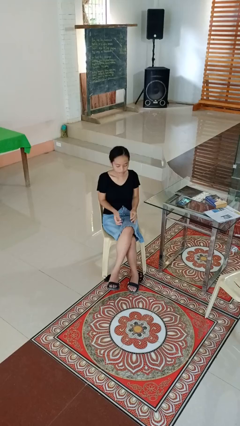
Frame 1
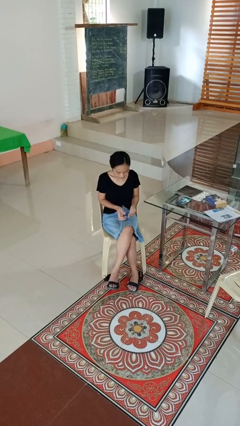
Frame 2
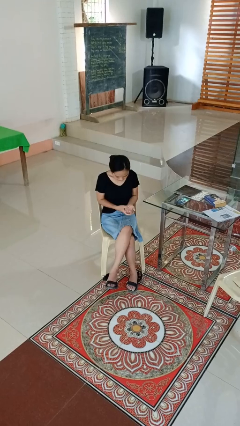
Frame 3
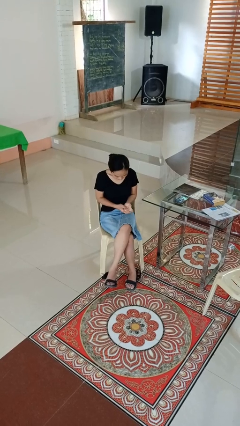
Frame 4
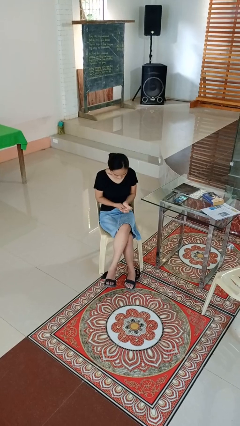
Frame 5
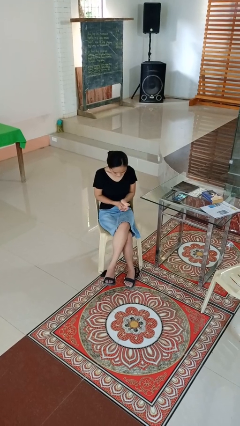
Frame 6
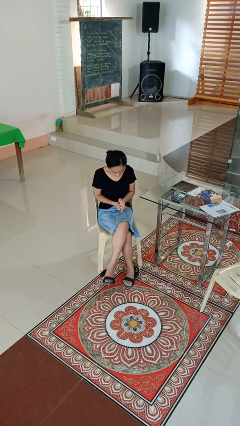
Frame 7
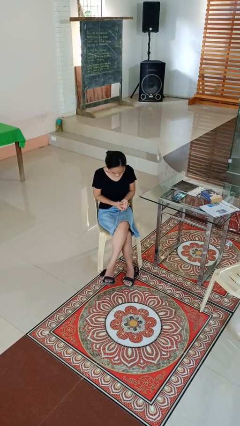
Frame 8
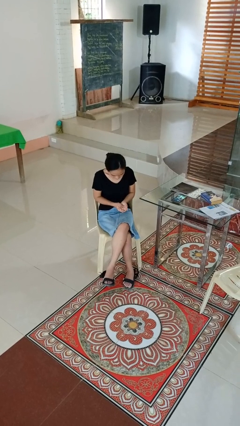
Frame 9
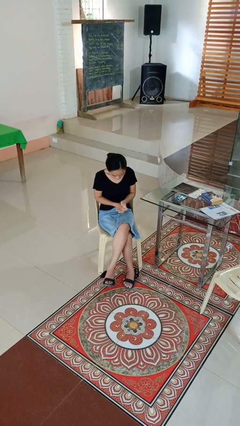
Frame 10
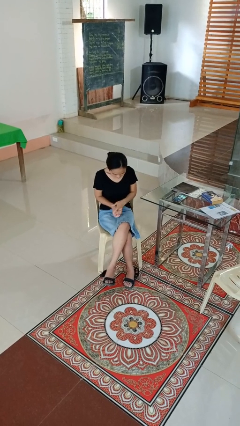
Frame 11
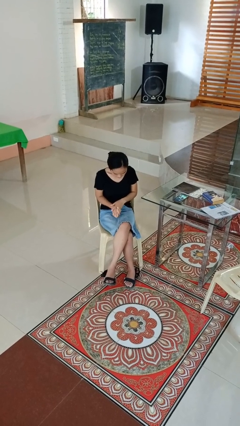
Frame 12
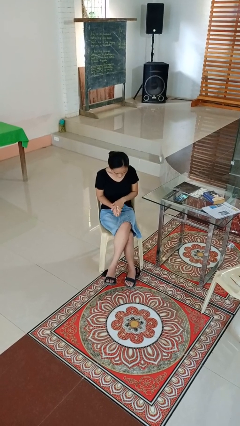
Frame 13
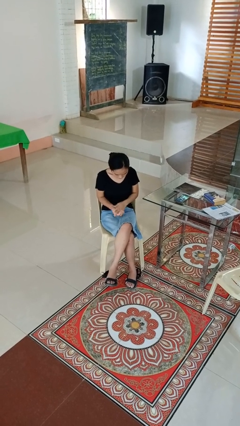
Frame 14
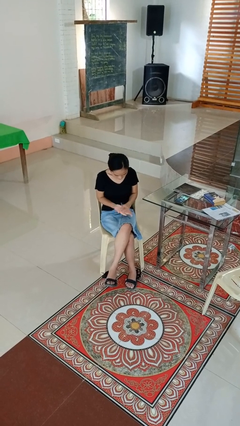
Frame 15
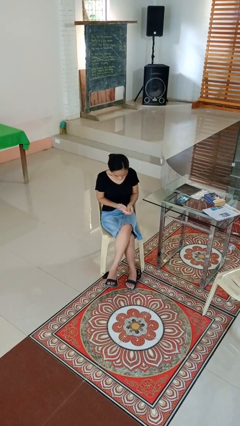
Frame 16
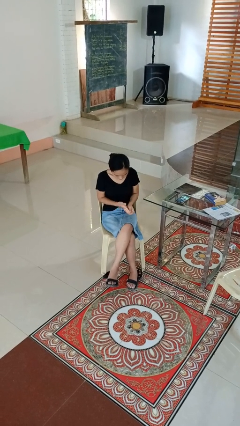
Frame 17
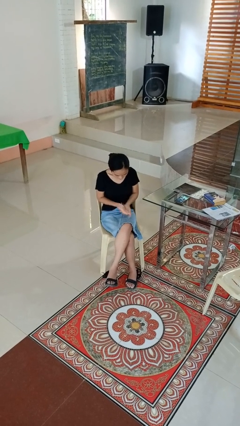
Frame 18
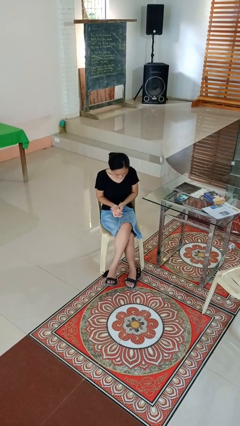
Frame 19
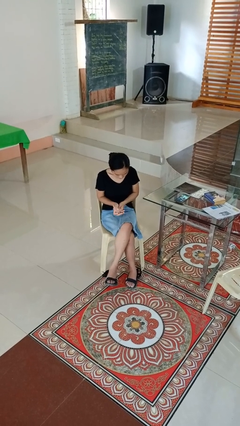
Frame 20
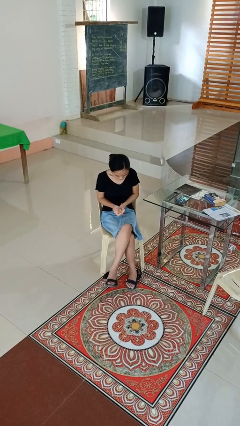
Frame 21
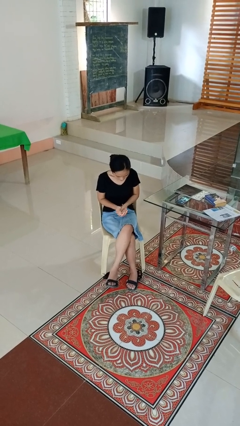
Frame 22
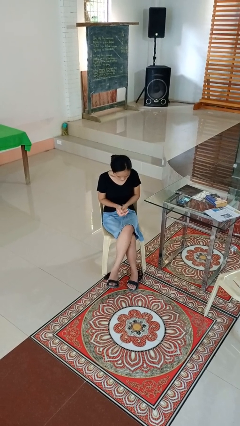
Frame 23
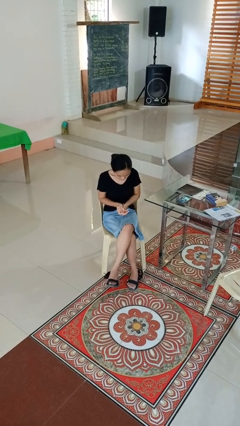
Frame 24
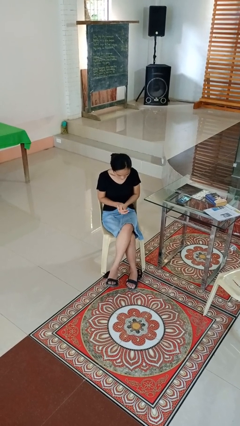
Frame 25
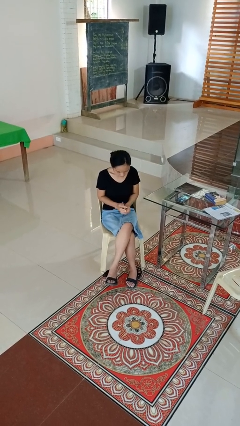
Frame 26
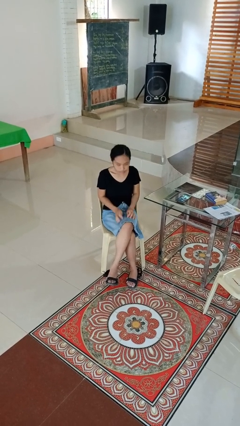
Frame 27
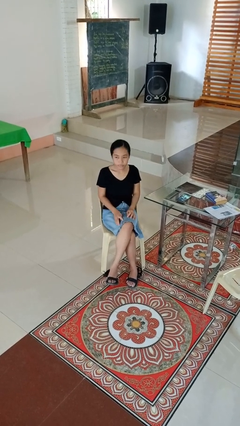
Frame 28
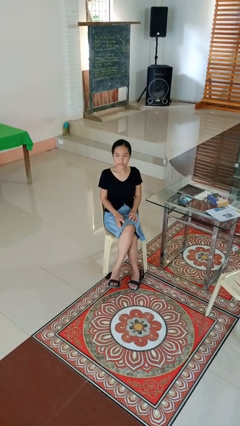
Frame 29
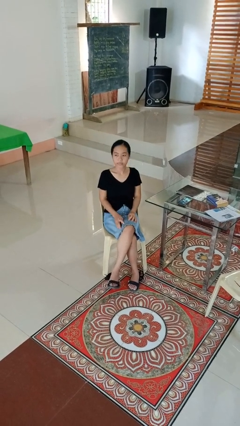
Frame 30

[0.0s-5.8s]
person looks at hands in lap

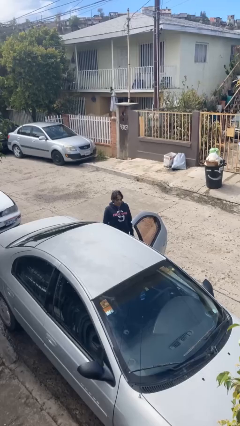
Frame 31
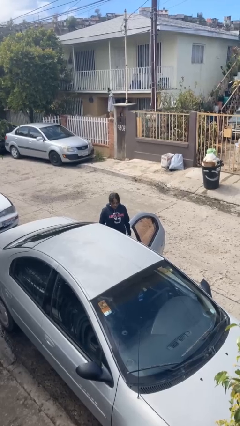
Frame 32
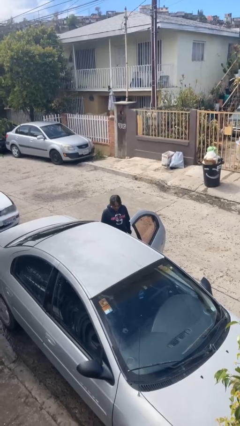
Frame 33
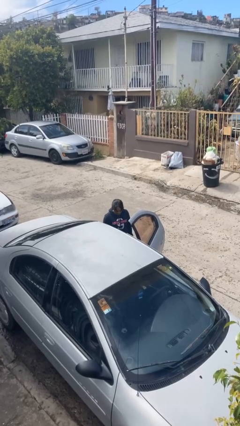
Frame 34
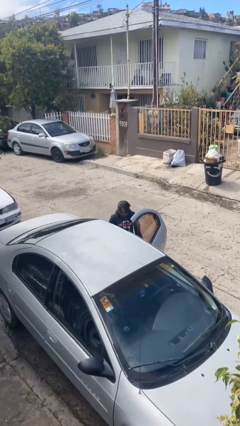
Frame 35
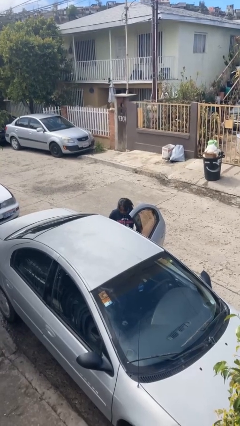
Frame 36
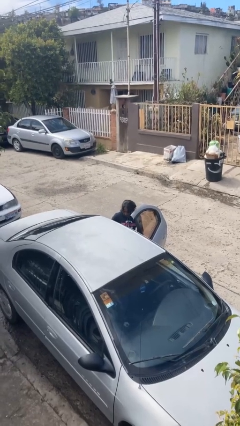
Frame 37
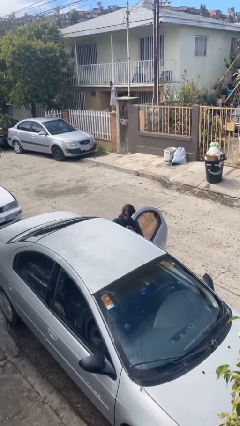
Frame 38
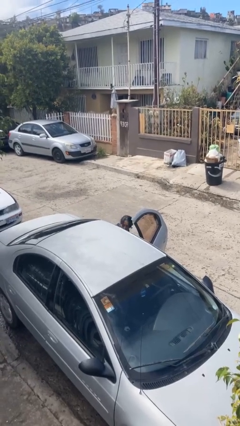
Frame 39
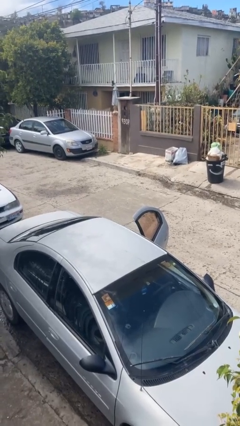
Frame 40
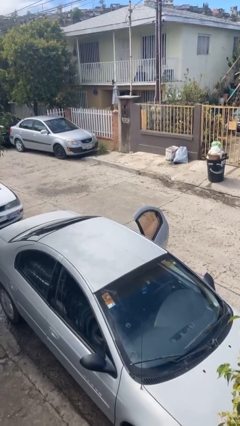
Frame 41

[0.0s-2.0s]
person enters car

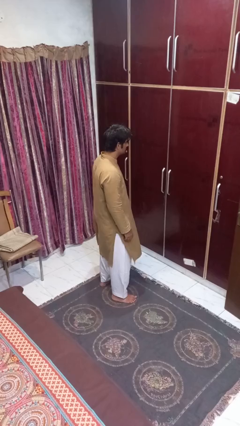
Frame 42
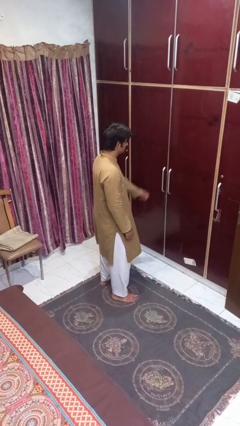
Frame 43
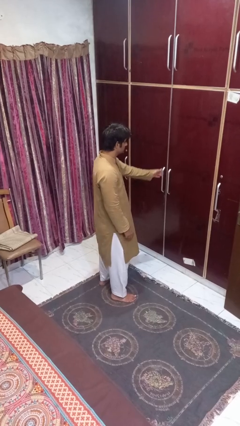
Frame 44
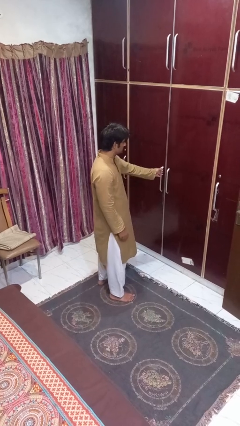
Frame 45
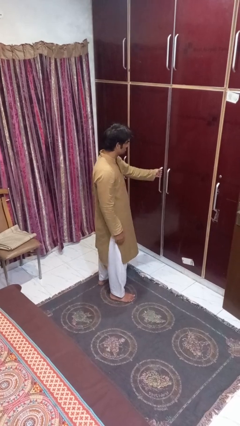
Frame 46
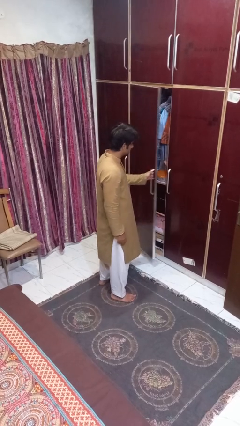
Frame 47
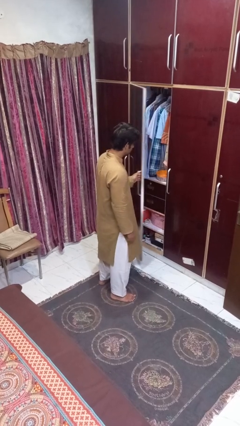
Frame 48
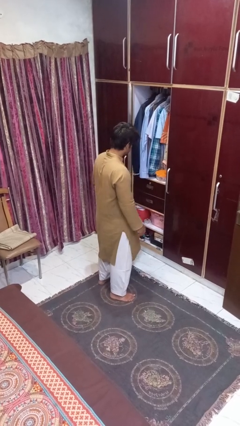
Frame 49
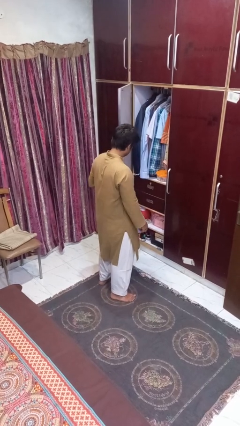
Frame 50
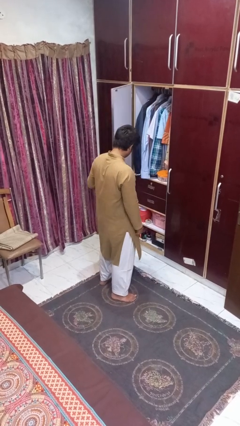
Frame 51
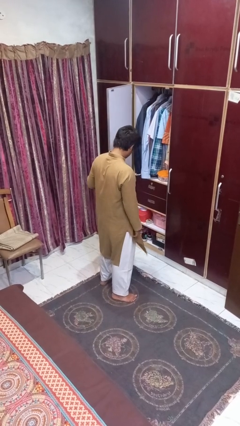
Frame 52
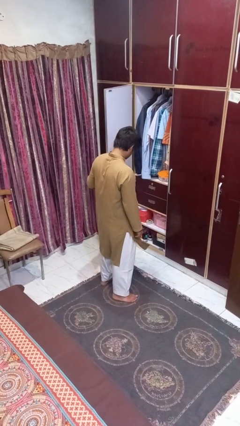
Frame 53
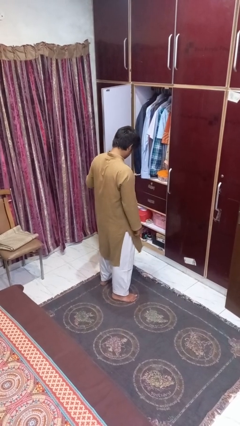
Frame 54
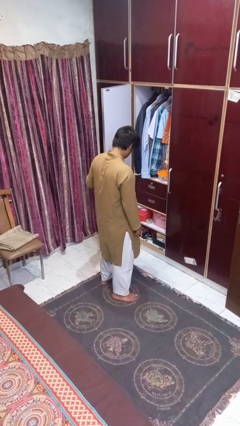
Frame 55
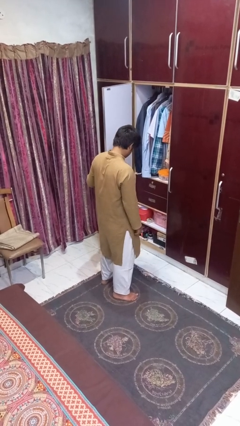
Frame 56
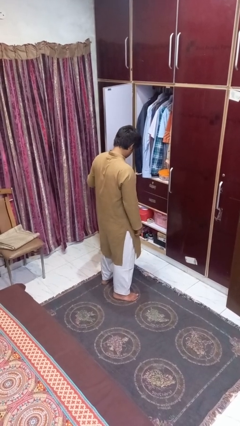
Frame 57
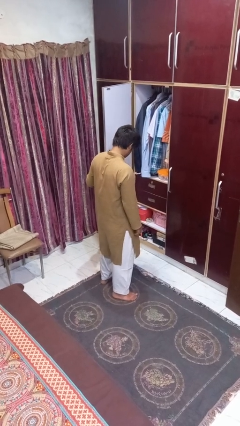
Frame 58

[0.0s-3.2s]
person opens closet door

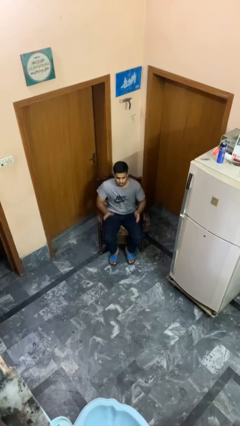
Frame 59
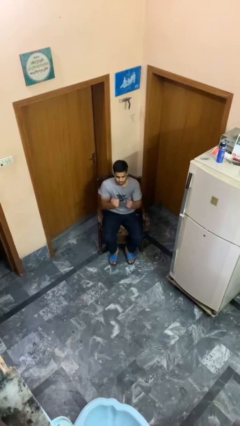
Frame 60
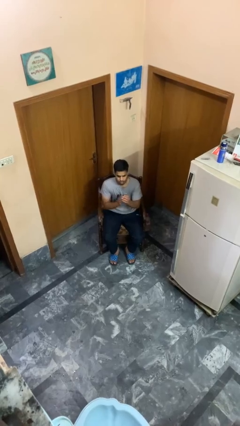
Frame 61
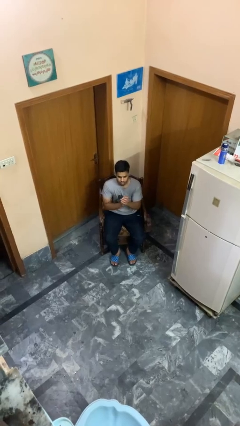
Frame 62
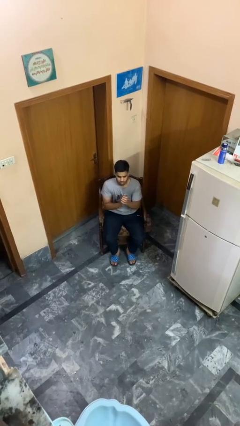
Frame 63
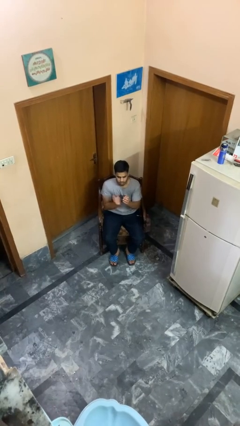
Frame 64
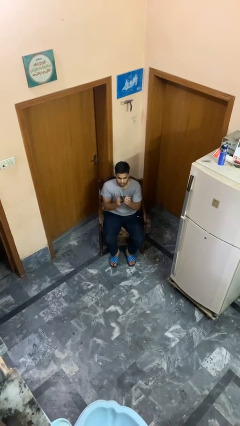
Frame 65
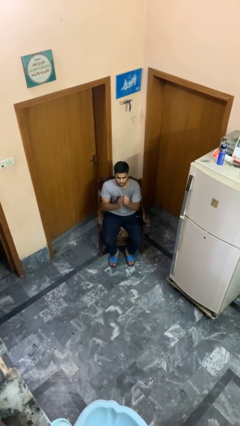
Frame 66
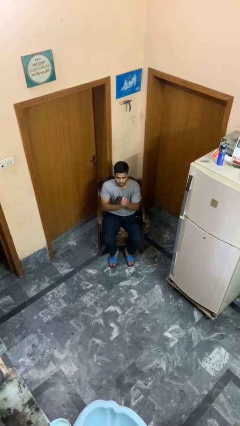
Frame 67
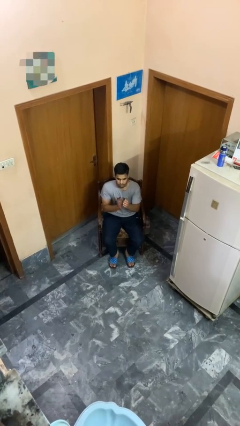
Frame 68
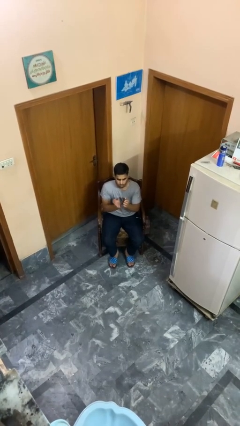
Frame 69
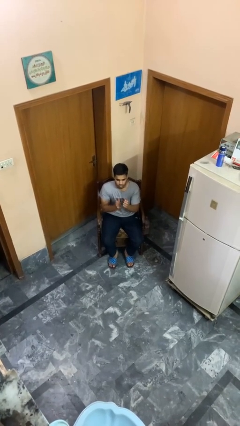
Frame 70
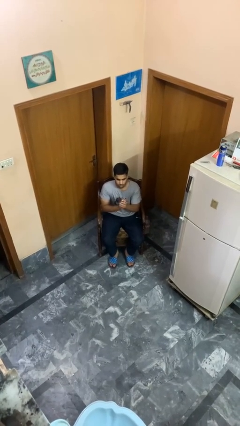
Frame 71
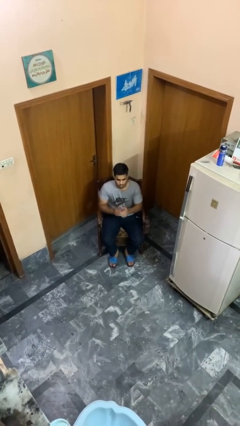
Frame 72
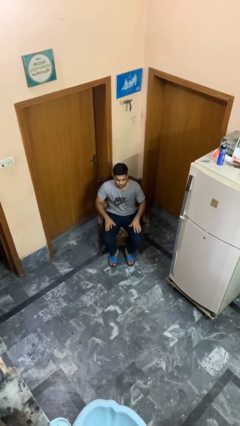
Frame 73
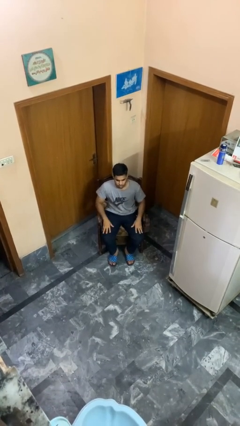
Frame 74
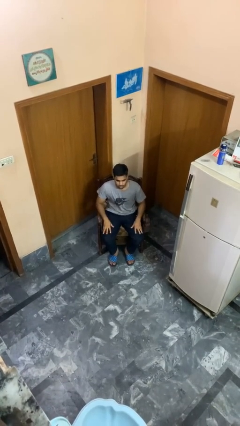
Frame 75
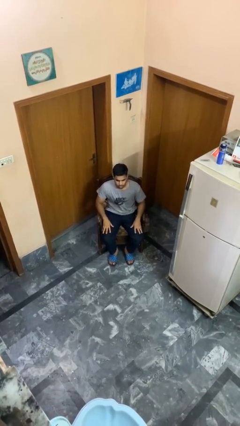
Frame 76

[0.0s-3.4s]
person claps hands

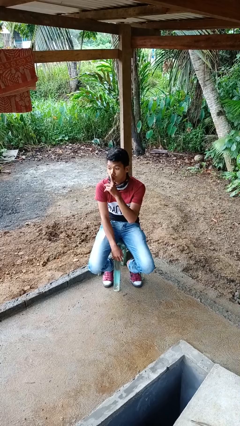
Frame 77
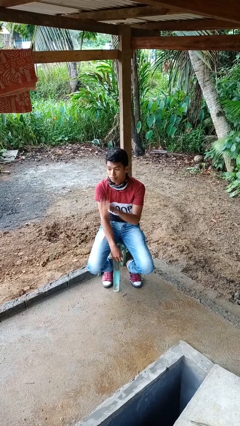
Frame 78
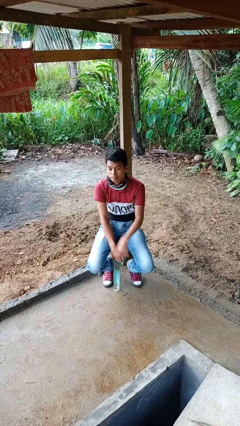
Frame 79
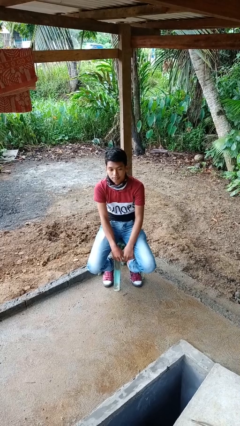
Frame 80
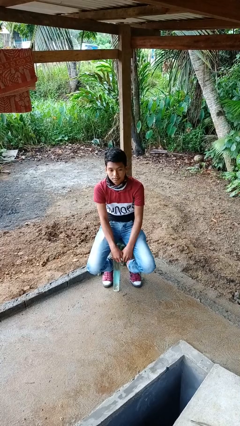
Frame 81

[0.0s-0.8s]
person gestures be quiet

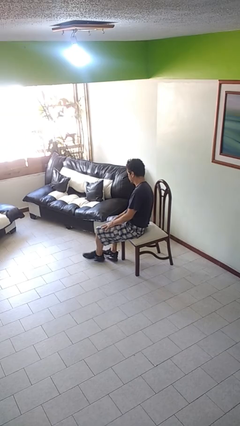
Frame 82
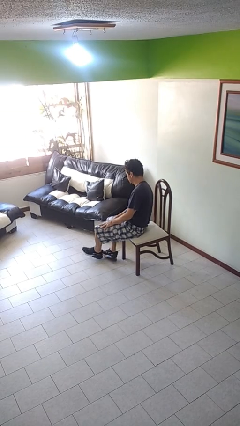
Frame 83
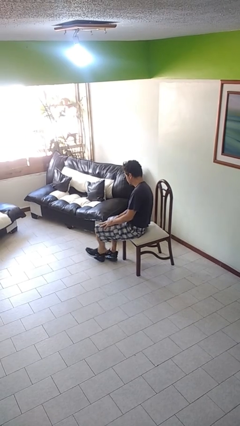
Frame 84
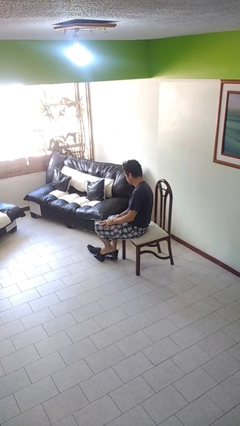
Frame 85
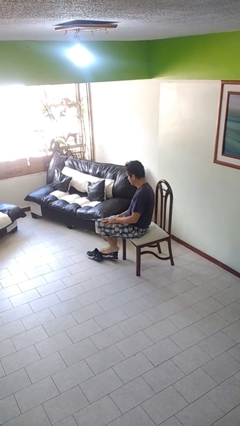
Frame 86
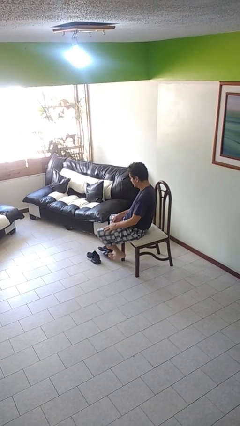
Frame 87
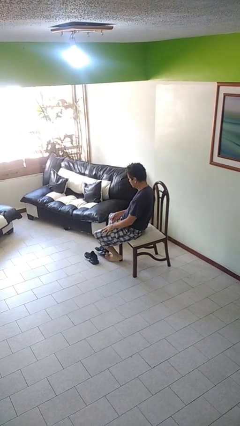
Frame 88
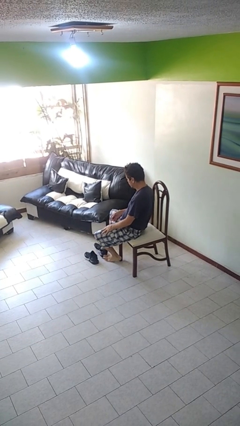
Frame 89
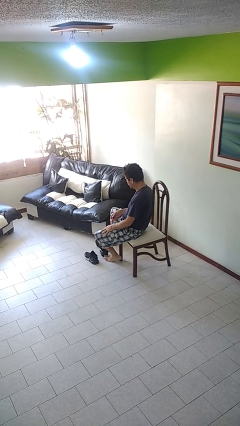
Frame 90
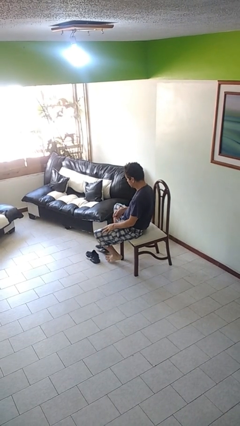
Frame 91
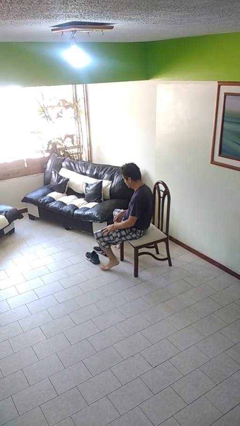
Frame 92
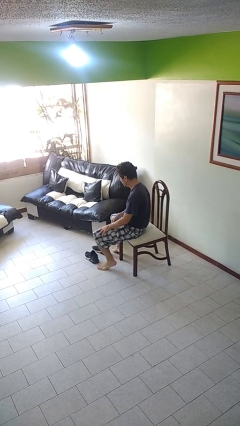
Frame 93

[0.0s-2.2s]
person takes off shoes
